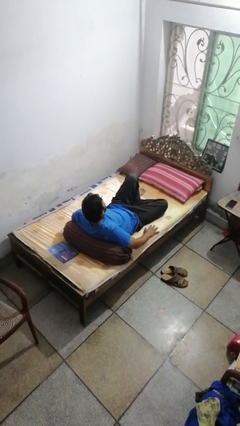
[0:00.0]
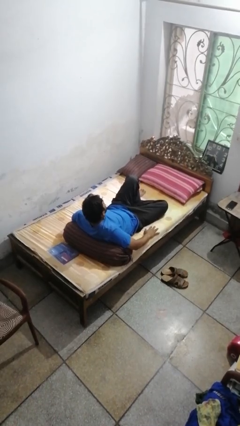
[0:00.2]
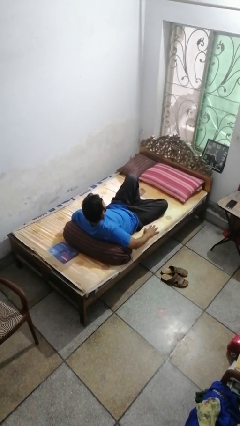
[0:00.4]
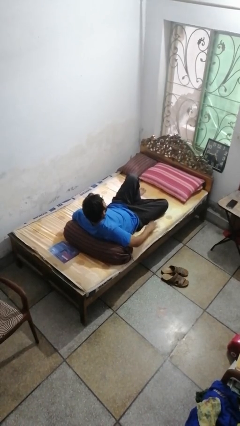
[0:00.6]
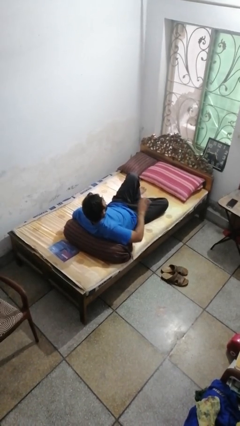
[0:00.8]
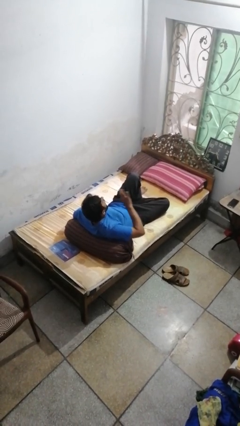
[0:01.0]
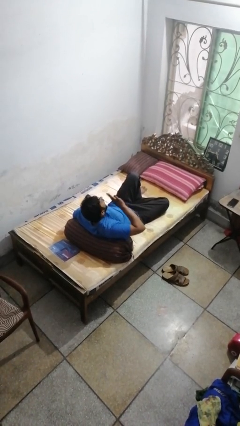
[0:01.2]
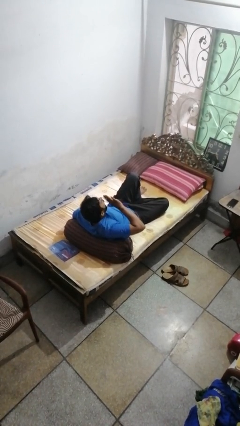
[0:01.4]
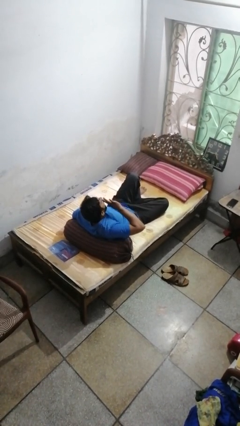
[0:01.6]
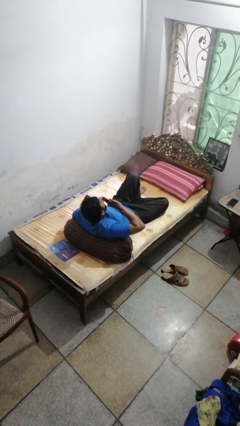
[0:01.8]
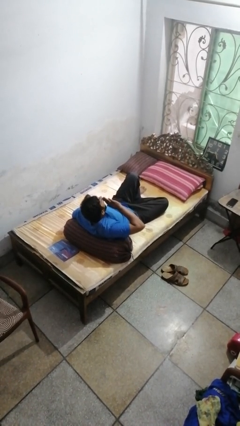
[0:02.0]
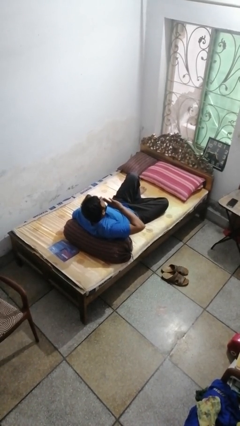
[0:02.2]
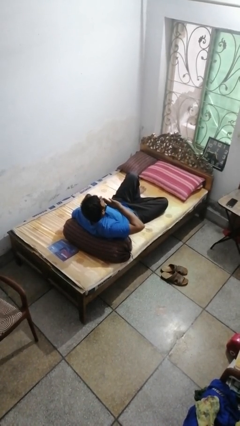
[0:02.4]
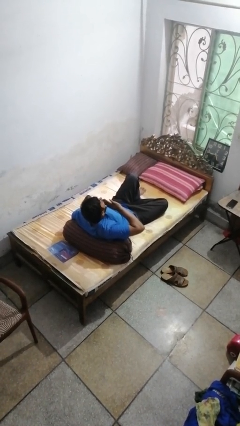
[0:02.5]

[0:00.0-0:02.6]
person yawns

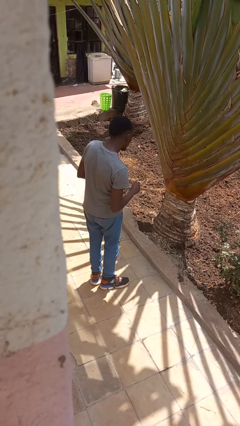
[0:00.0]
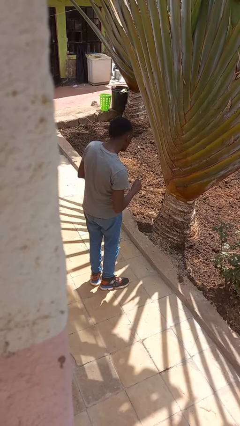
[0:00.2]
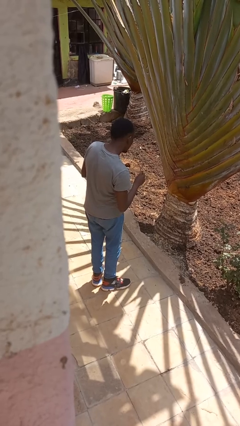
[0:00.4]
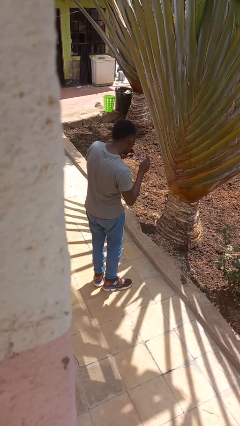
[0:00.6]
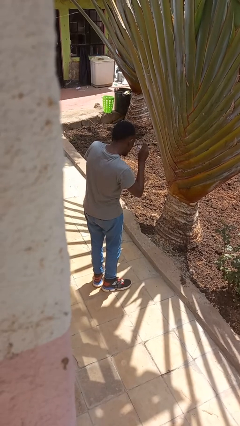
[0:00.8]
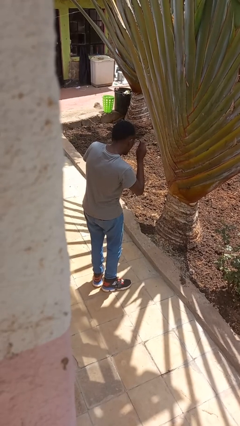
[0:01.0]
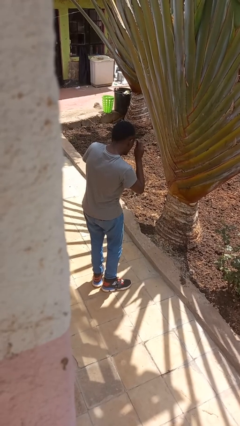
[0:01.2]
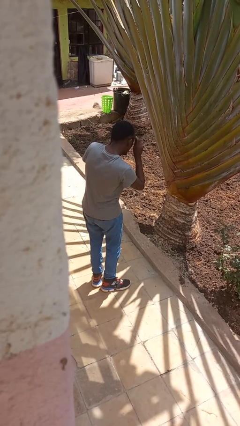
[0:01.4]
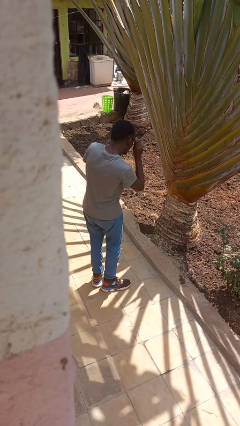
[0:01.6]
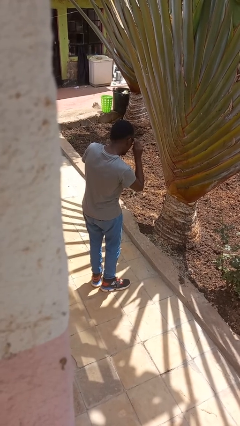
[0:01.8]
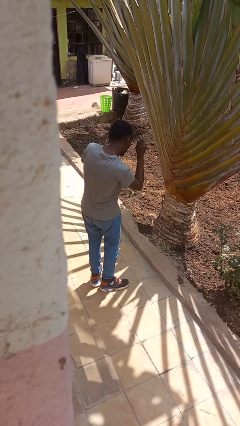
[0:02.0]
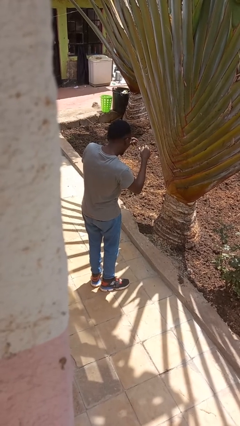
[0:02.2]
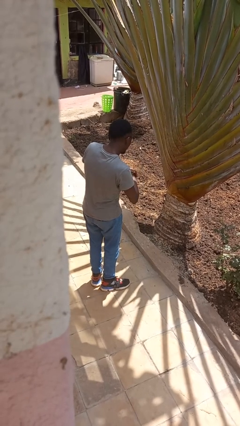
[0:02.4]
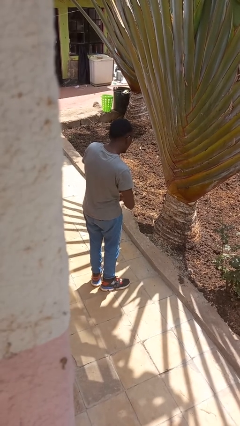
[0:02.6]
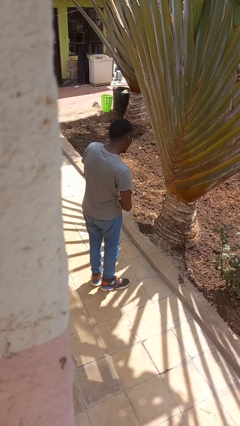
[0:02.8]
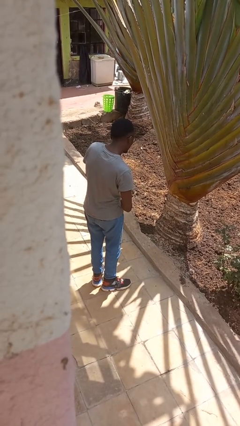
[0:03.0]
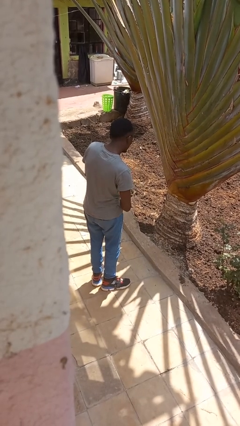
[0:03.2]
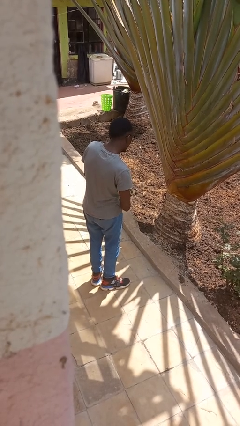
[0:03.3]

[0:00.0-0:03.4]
person puts on glasses

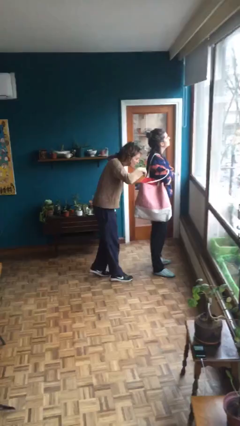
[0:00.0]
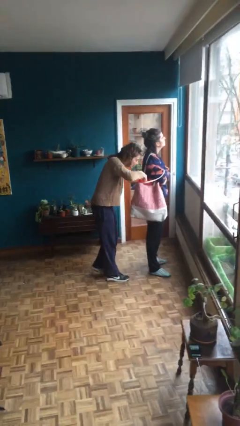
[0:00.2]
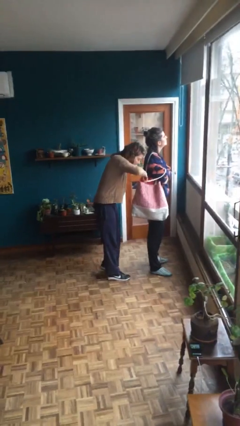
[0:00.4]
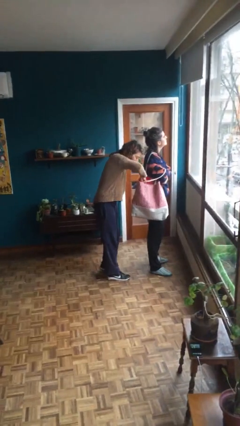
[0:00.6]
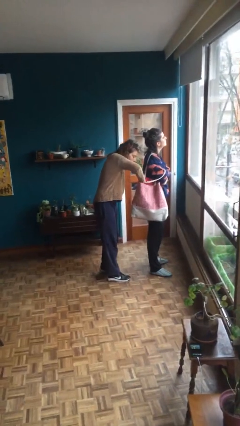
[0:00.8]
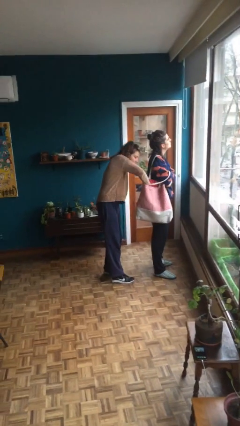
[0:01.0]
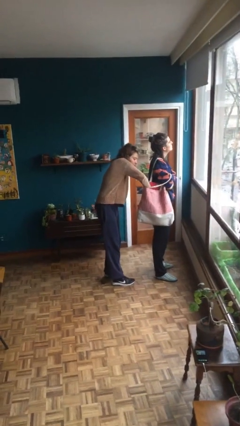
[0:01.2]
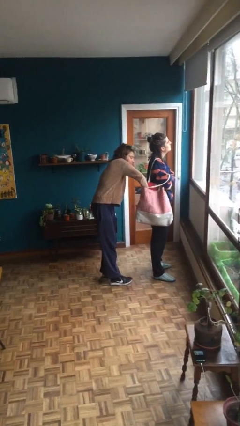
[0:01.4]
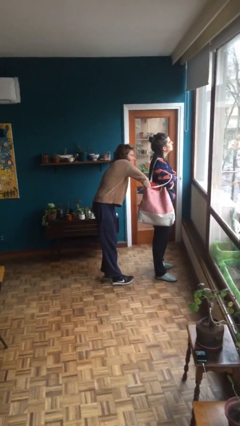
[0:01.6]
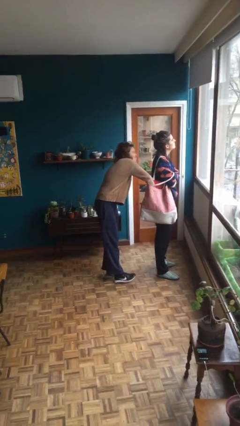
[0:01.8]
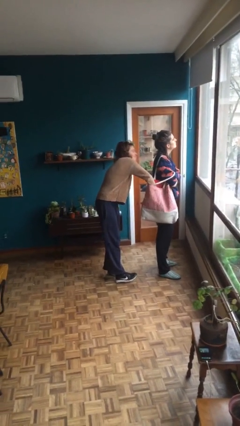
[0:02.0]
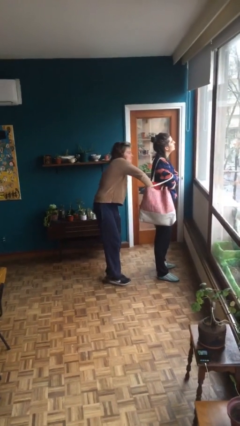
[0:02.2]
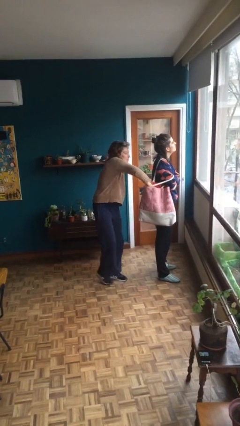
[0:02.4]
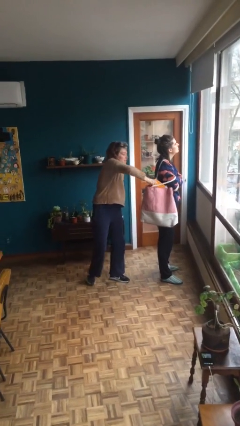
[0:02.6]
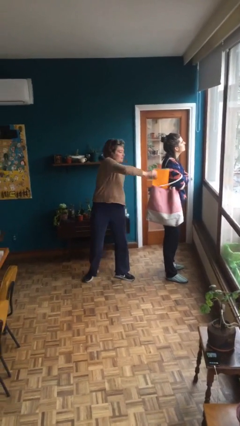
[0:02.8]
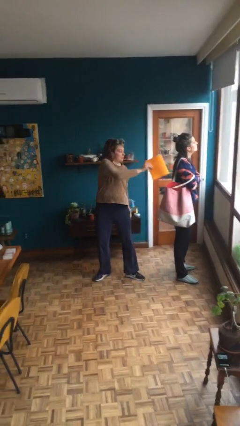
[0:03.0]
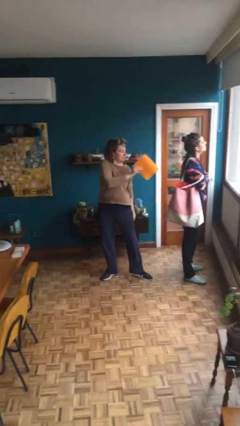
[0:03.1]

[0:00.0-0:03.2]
person steals object from person

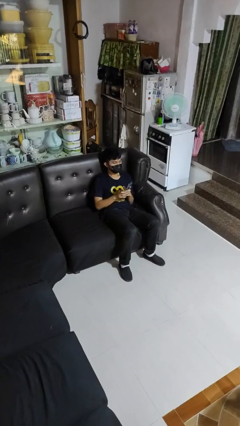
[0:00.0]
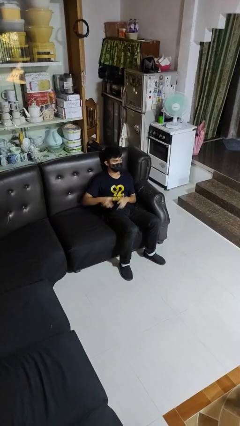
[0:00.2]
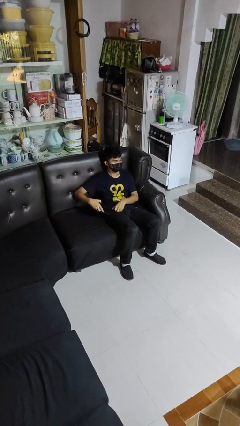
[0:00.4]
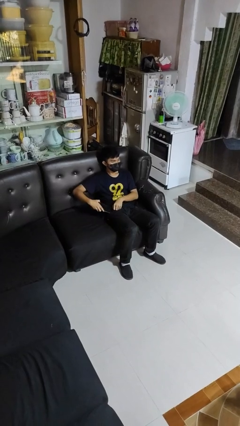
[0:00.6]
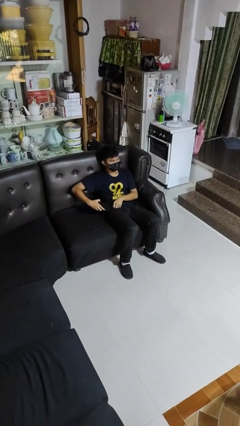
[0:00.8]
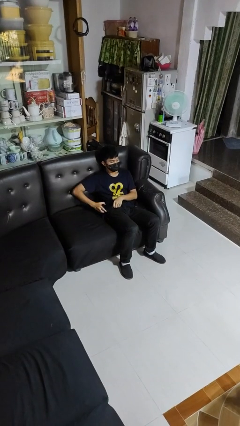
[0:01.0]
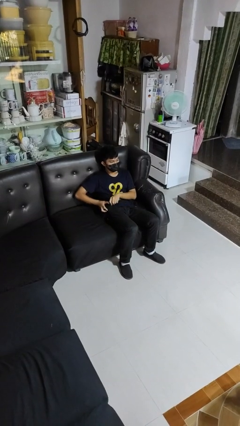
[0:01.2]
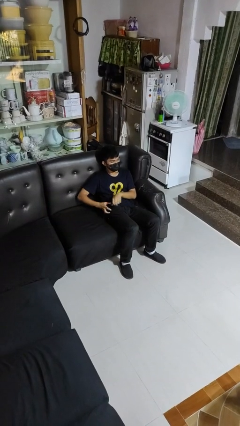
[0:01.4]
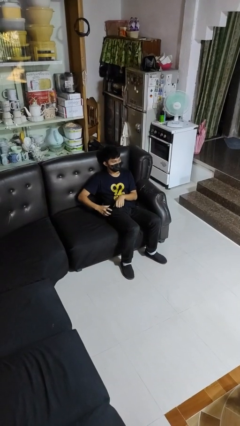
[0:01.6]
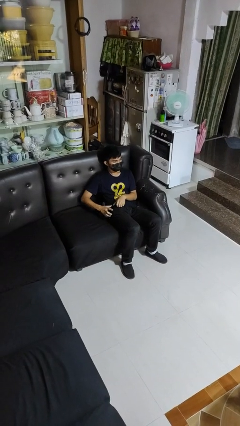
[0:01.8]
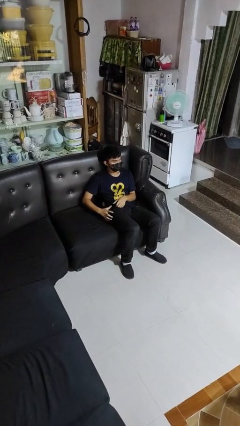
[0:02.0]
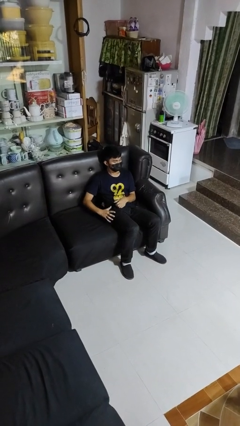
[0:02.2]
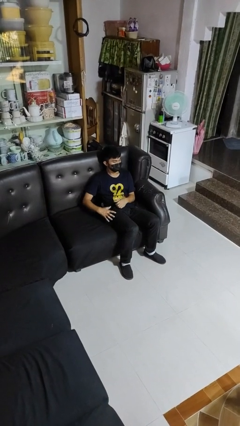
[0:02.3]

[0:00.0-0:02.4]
person puts phone into pocket

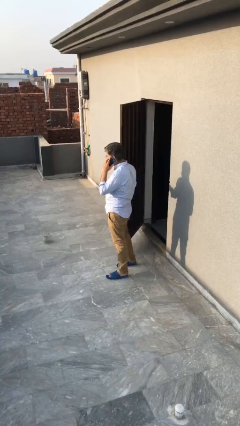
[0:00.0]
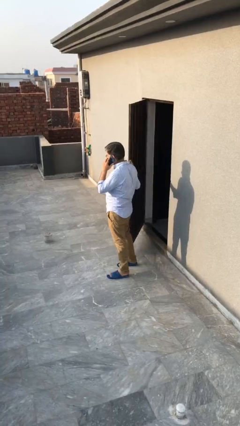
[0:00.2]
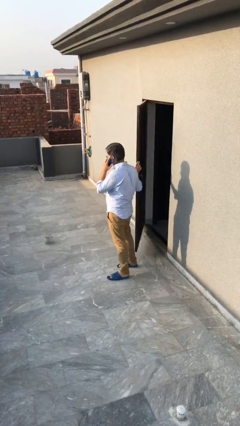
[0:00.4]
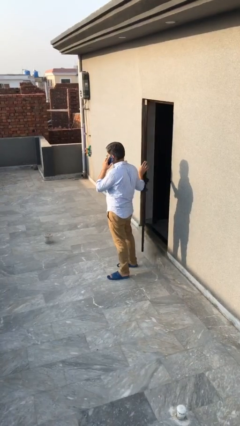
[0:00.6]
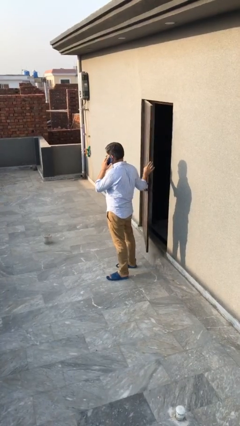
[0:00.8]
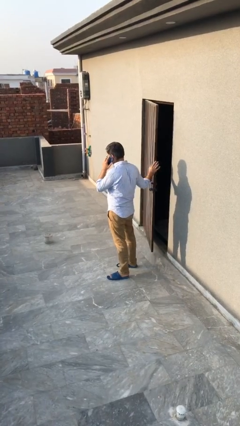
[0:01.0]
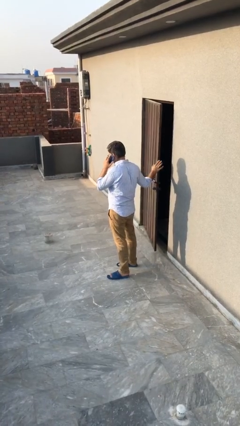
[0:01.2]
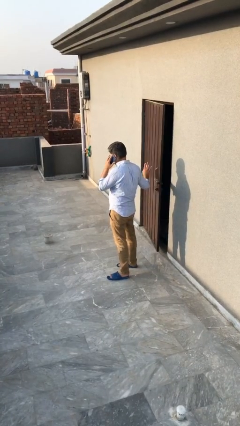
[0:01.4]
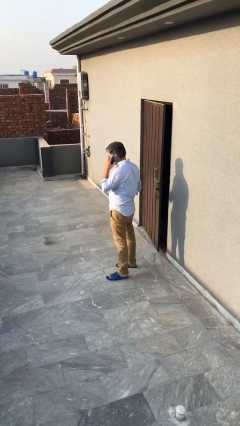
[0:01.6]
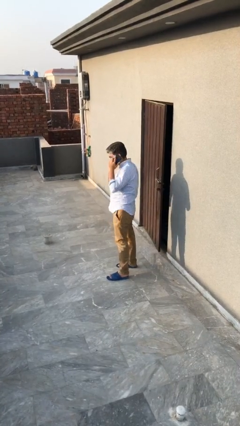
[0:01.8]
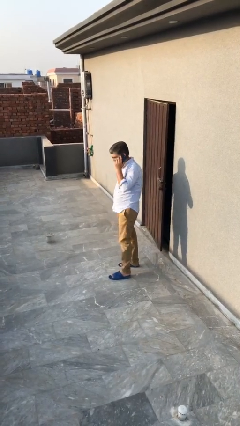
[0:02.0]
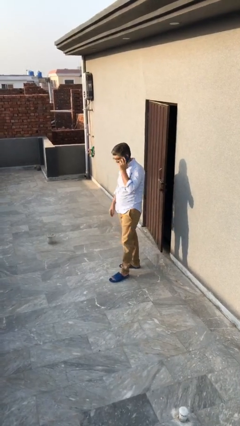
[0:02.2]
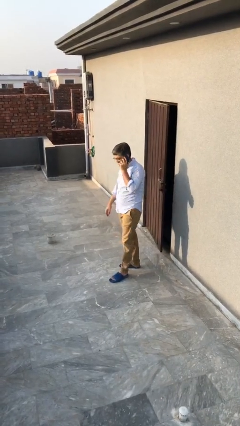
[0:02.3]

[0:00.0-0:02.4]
person closes facility door

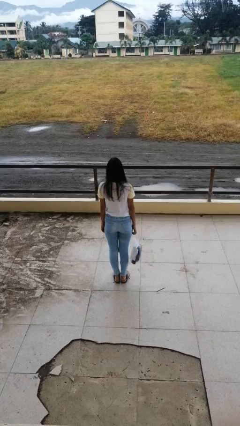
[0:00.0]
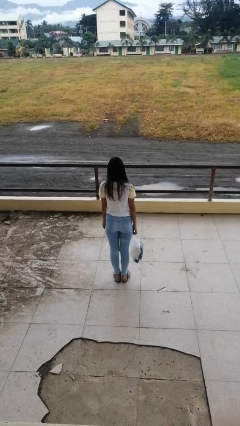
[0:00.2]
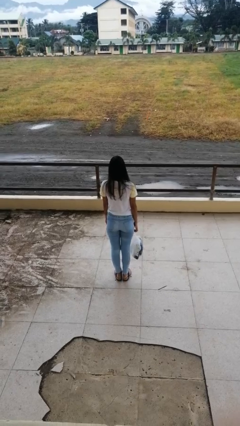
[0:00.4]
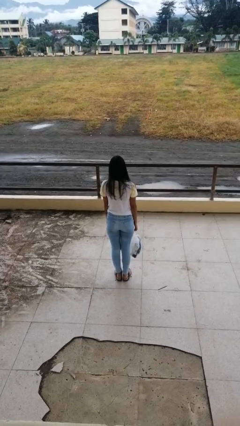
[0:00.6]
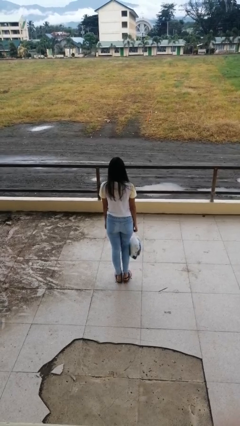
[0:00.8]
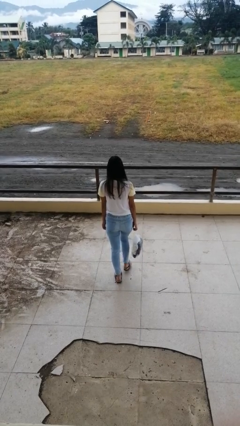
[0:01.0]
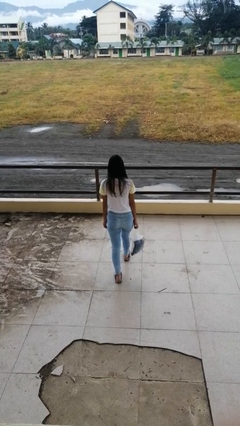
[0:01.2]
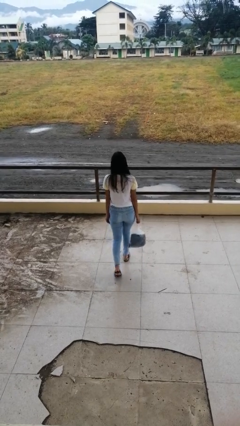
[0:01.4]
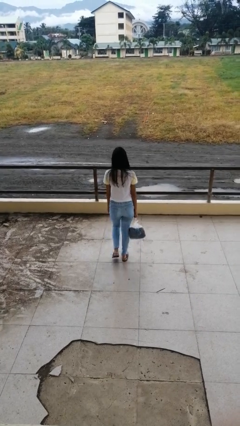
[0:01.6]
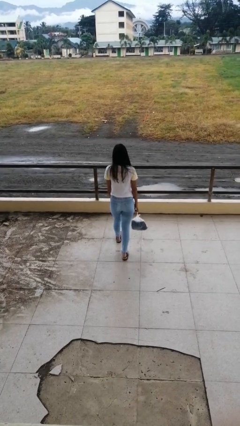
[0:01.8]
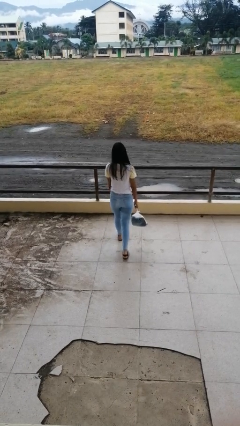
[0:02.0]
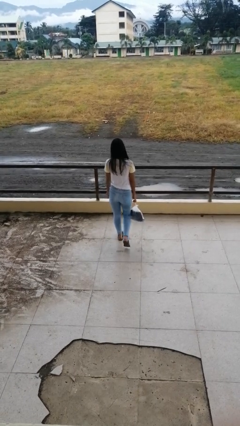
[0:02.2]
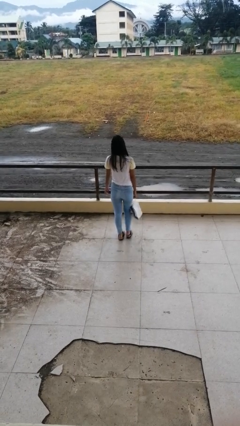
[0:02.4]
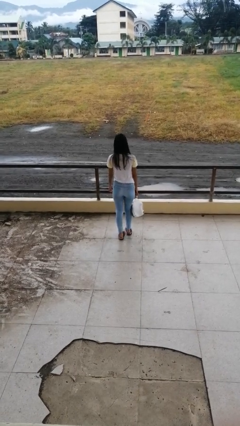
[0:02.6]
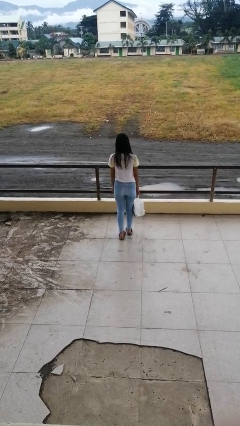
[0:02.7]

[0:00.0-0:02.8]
person carries groceries

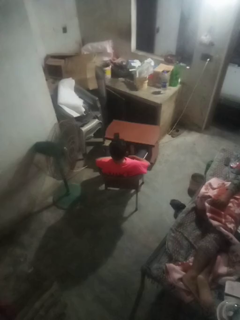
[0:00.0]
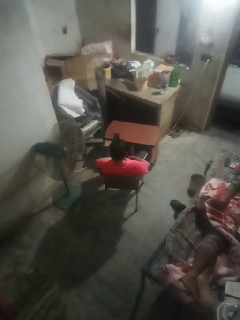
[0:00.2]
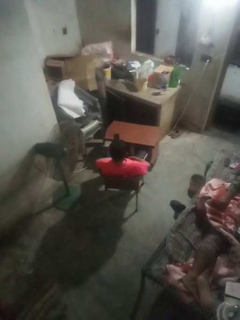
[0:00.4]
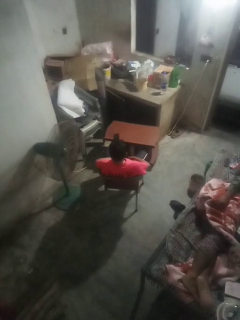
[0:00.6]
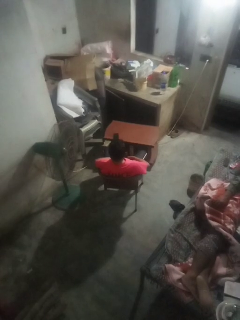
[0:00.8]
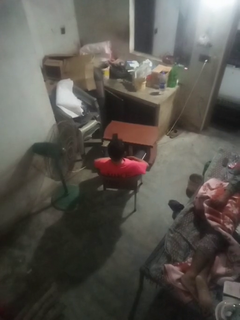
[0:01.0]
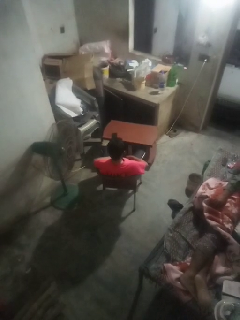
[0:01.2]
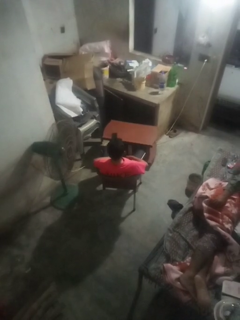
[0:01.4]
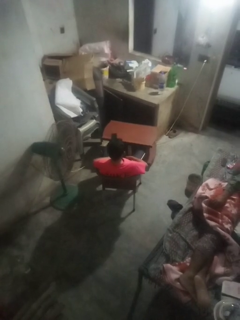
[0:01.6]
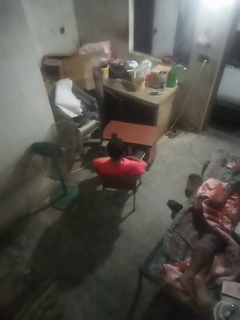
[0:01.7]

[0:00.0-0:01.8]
person nods head
